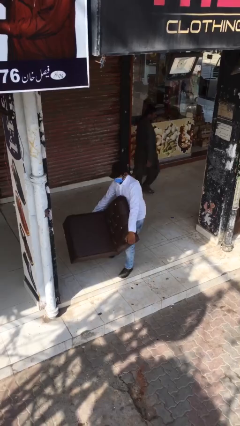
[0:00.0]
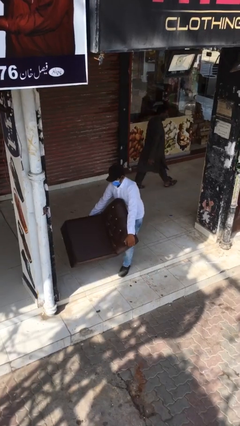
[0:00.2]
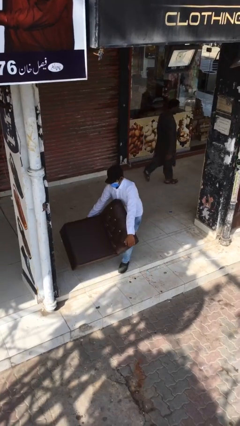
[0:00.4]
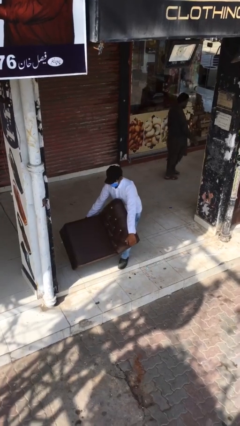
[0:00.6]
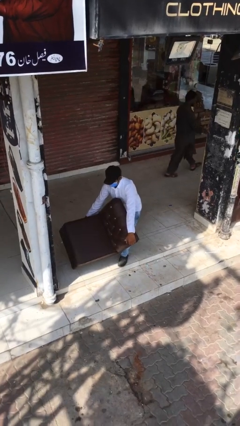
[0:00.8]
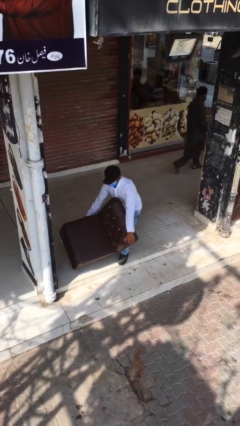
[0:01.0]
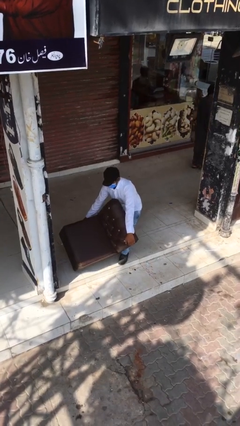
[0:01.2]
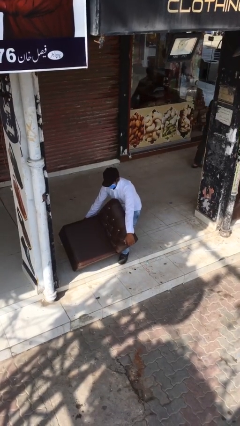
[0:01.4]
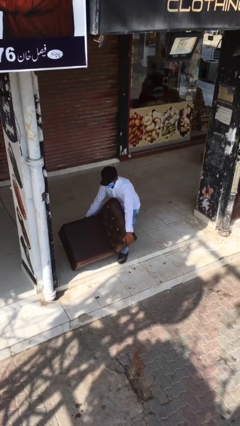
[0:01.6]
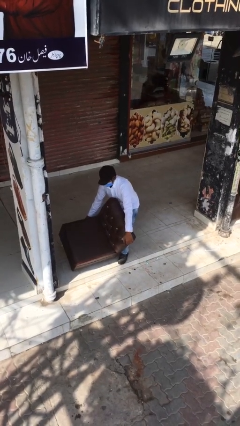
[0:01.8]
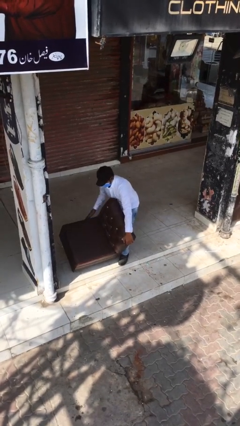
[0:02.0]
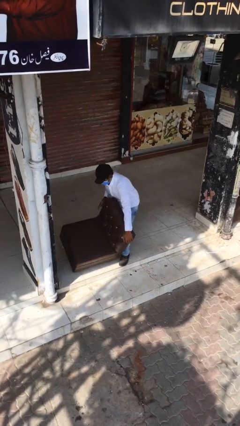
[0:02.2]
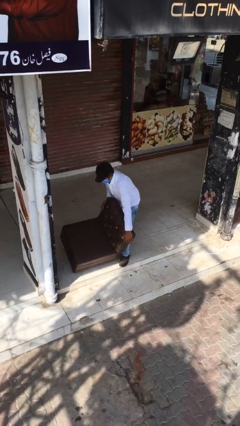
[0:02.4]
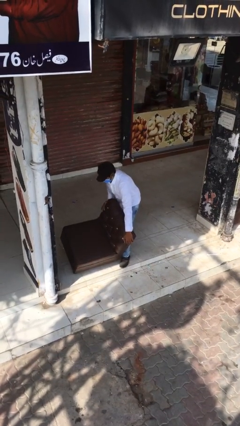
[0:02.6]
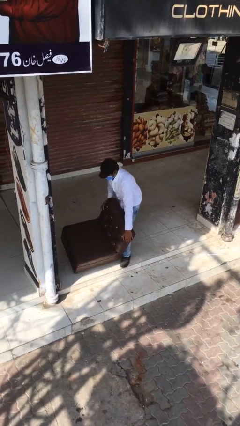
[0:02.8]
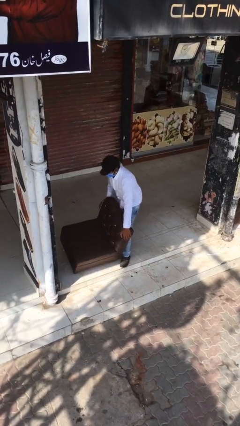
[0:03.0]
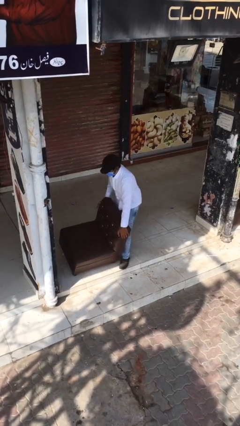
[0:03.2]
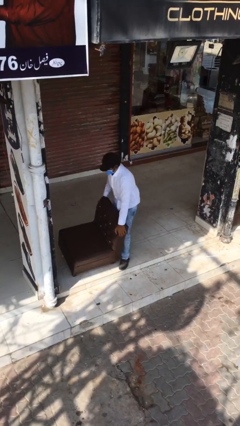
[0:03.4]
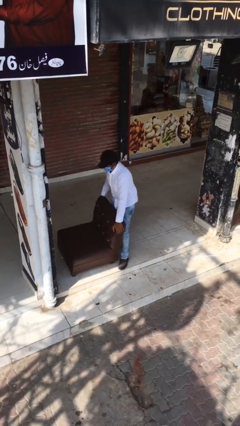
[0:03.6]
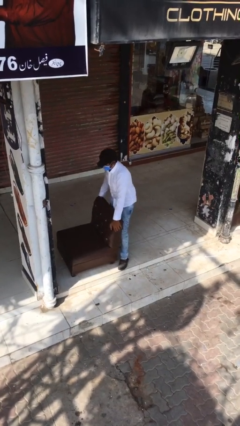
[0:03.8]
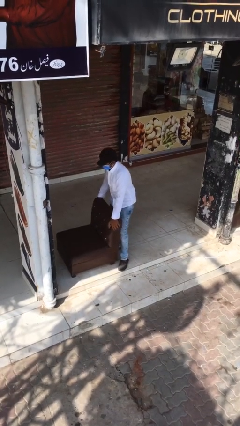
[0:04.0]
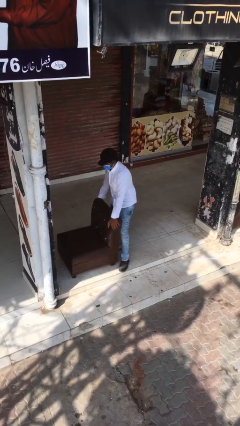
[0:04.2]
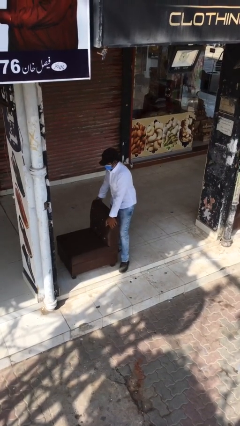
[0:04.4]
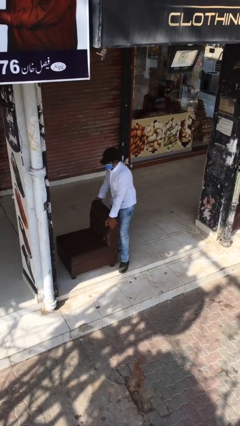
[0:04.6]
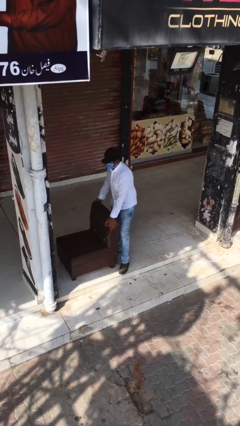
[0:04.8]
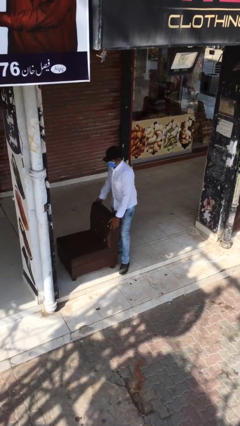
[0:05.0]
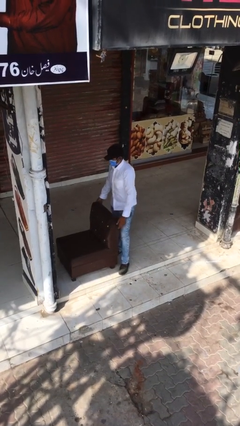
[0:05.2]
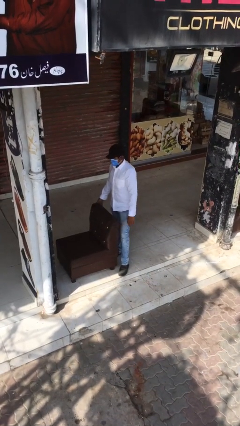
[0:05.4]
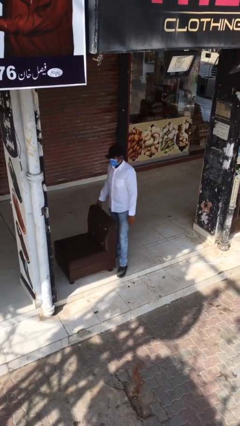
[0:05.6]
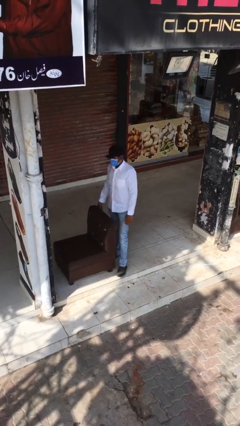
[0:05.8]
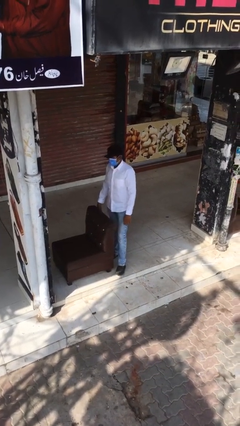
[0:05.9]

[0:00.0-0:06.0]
person puts down object on floor

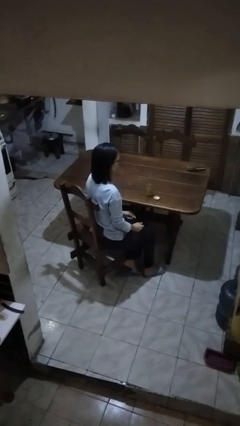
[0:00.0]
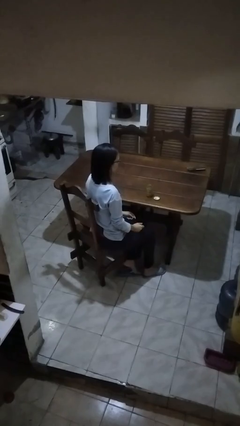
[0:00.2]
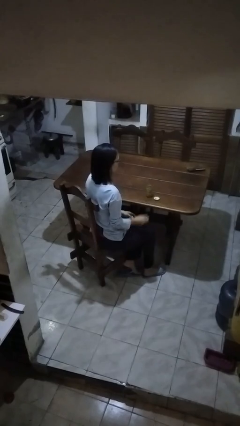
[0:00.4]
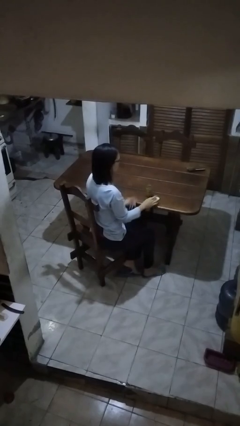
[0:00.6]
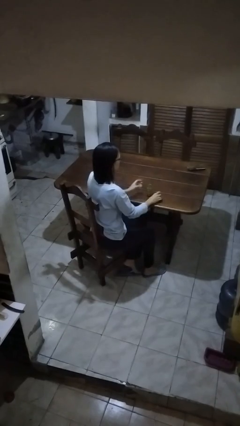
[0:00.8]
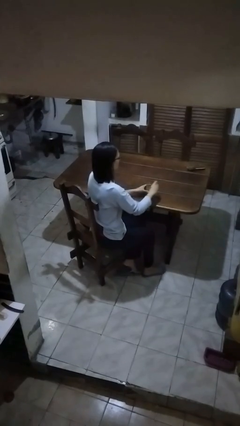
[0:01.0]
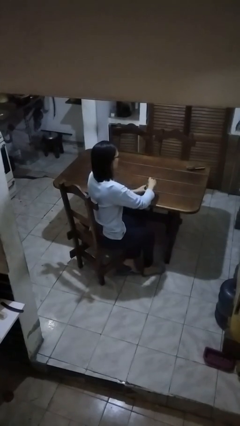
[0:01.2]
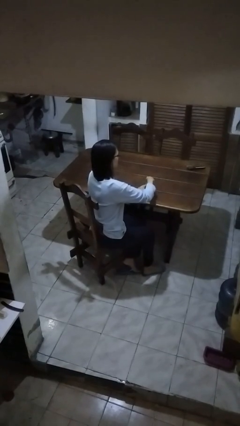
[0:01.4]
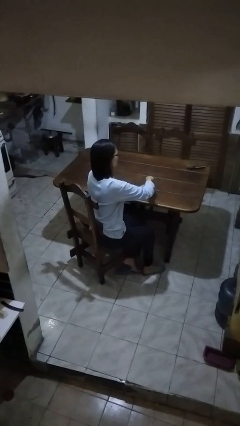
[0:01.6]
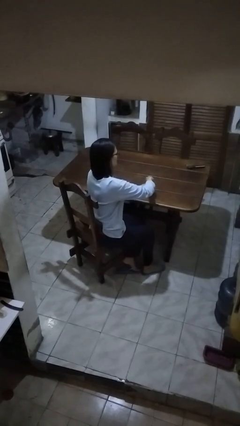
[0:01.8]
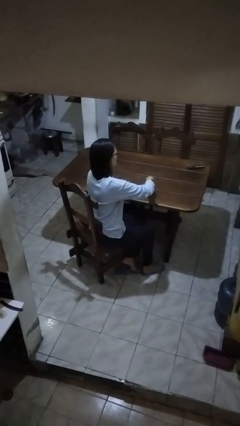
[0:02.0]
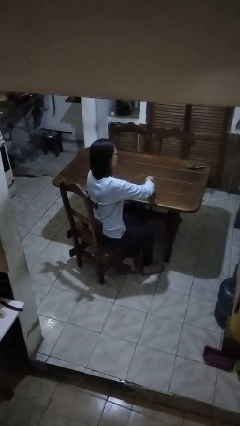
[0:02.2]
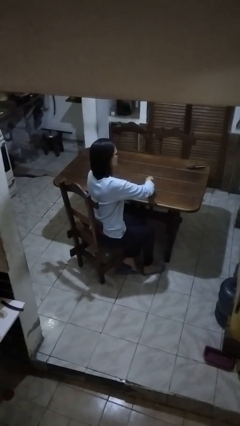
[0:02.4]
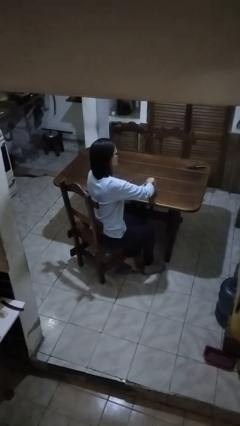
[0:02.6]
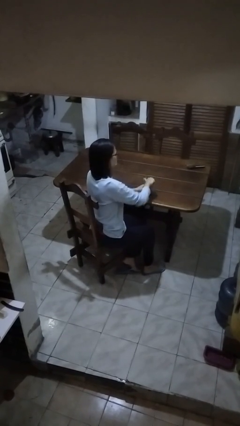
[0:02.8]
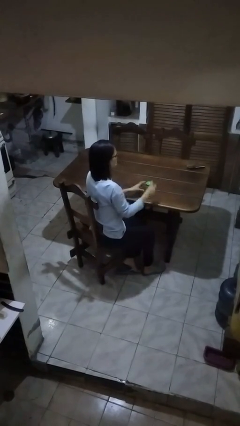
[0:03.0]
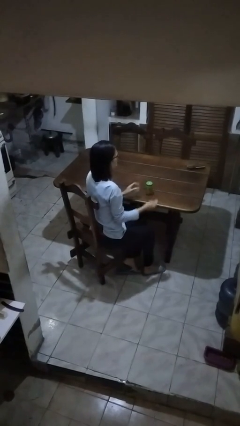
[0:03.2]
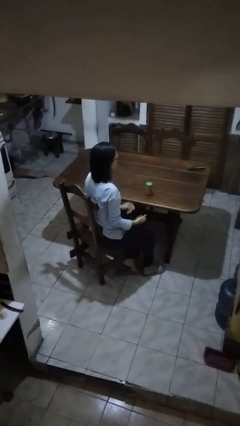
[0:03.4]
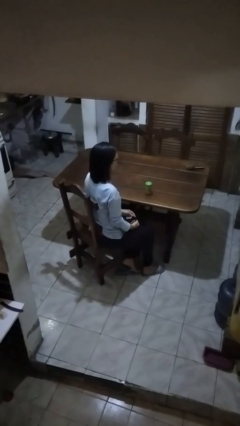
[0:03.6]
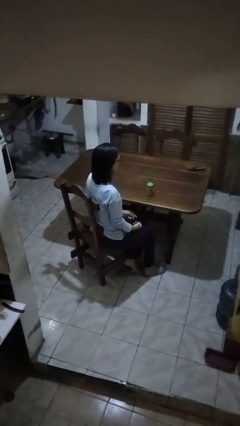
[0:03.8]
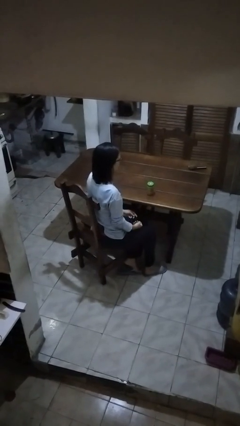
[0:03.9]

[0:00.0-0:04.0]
person closes jar

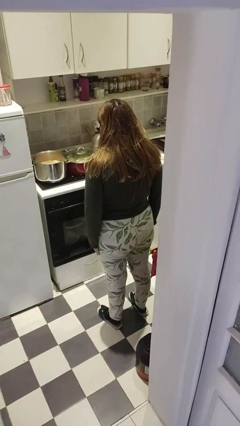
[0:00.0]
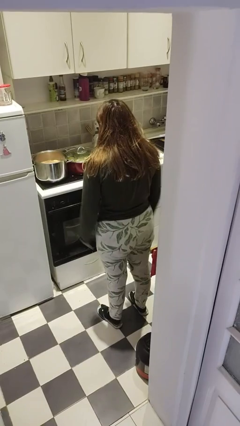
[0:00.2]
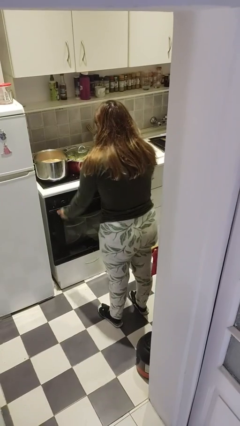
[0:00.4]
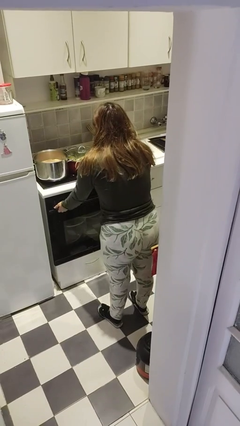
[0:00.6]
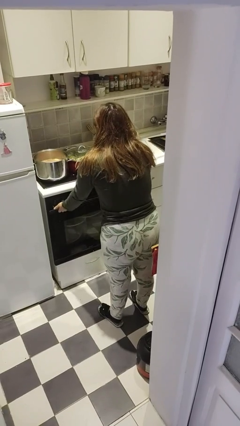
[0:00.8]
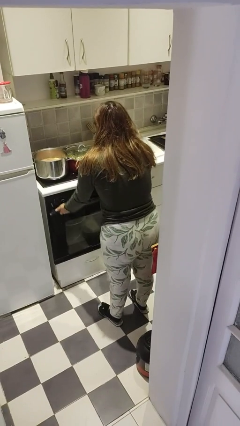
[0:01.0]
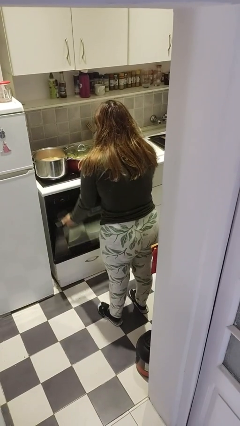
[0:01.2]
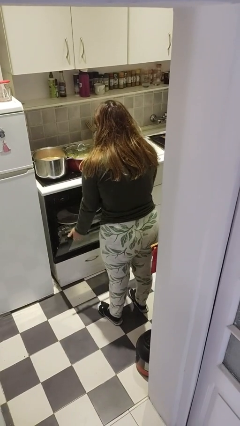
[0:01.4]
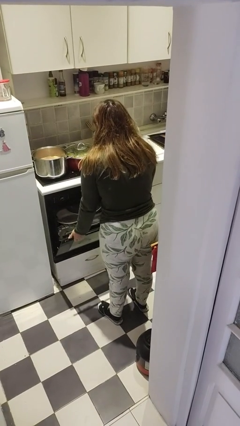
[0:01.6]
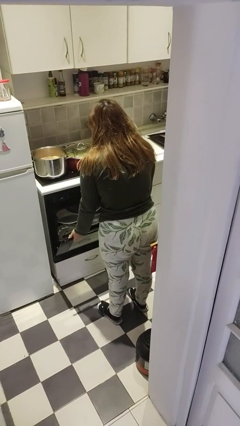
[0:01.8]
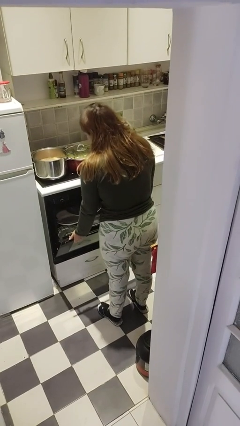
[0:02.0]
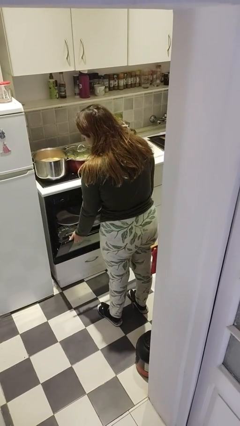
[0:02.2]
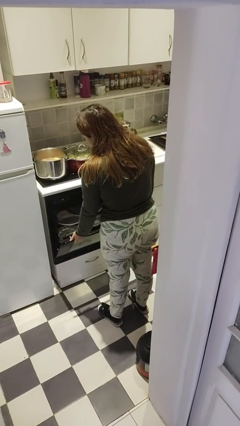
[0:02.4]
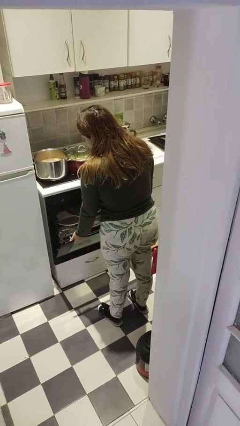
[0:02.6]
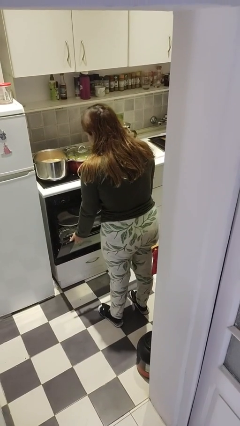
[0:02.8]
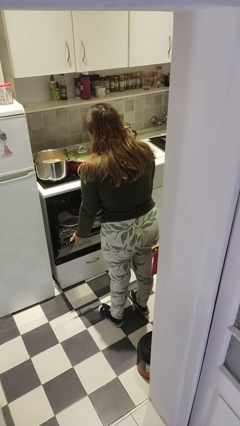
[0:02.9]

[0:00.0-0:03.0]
person opens dishwasher

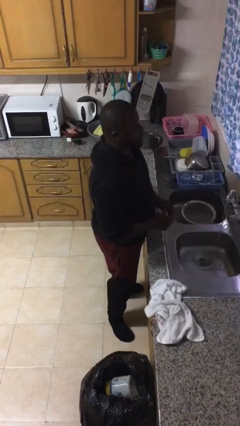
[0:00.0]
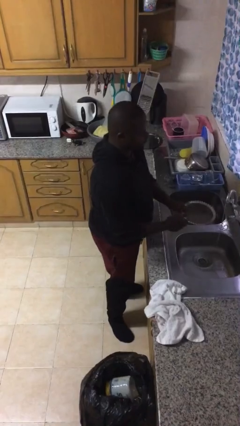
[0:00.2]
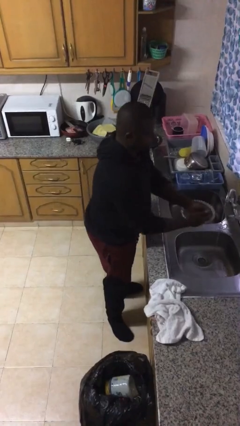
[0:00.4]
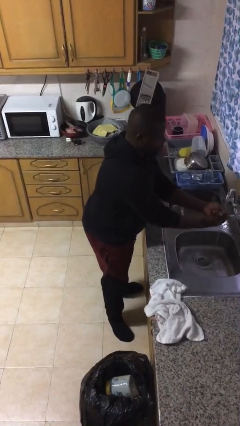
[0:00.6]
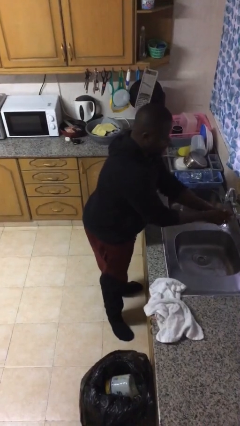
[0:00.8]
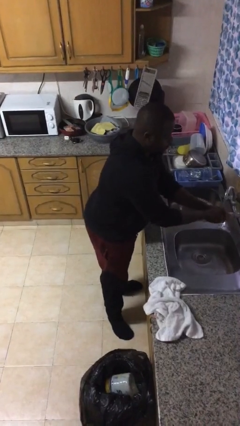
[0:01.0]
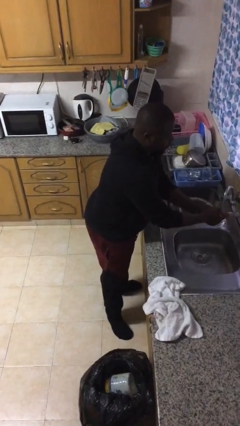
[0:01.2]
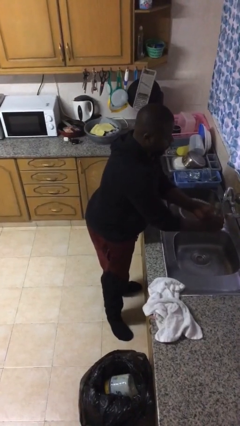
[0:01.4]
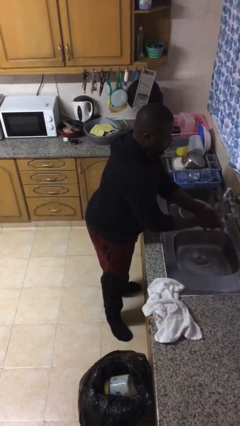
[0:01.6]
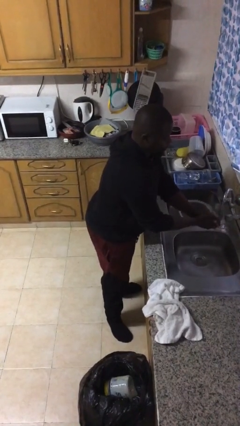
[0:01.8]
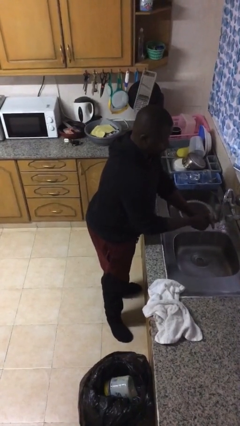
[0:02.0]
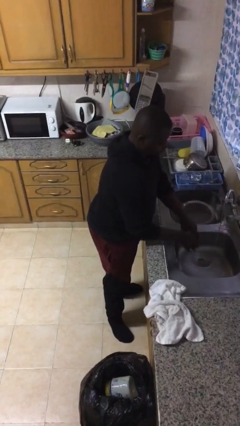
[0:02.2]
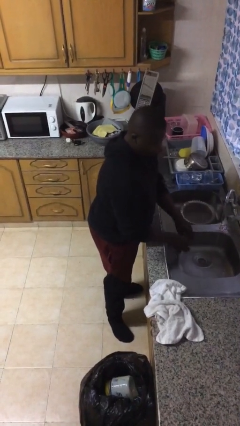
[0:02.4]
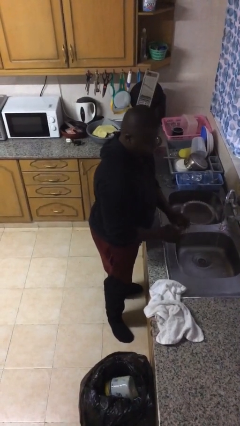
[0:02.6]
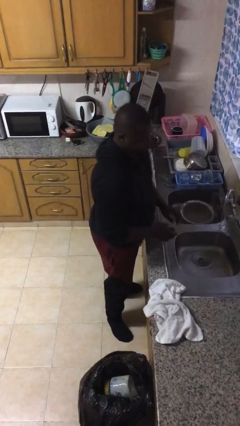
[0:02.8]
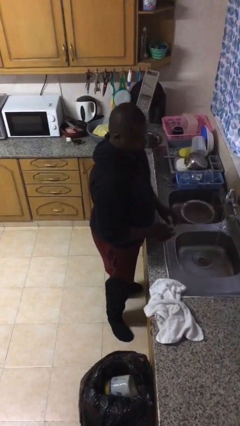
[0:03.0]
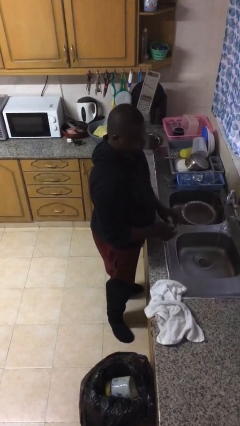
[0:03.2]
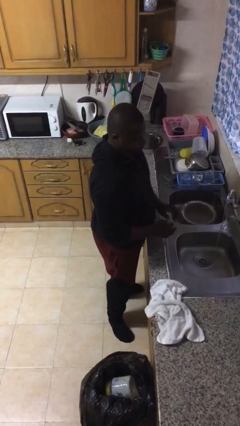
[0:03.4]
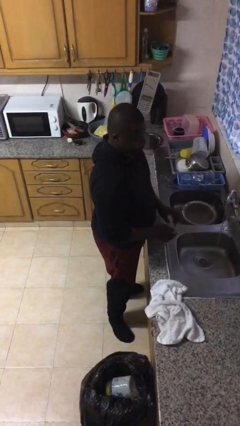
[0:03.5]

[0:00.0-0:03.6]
person washes hands

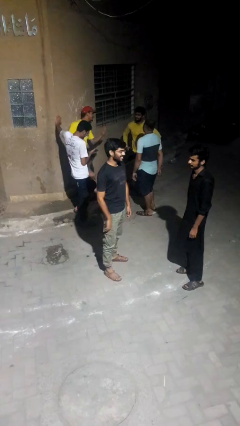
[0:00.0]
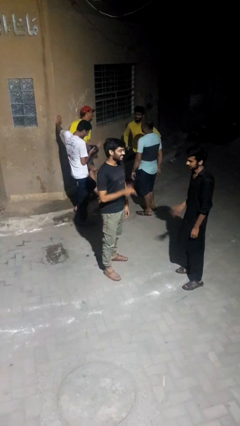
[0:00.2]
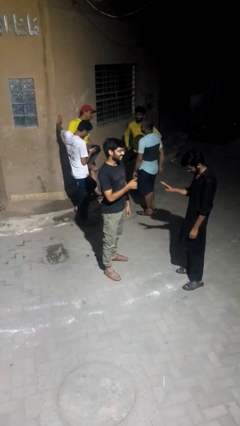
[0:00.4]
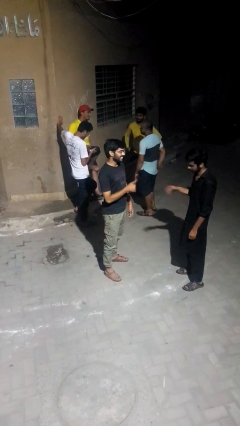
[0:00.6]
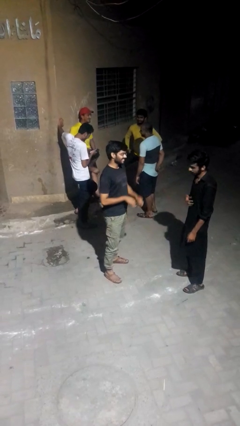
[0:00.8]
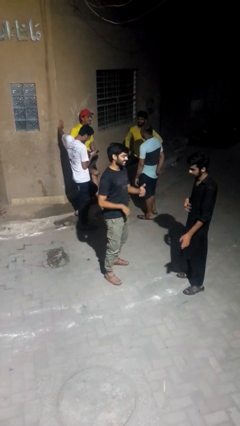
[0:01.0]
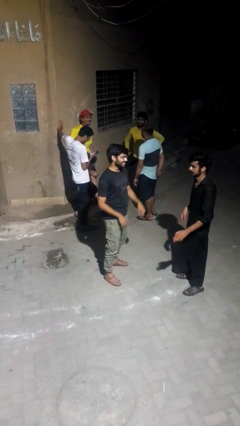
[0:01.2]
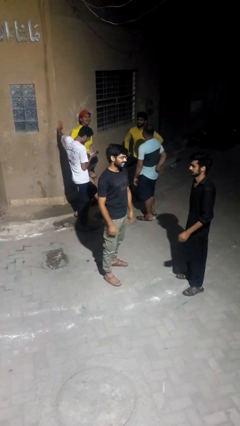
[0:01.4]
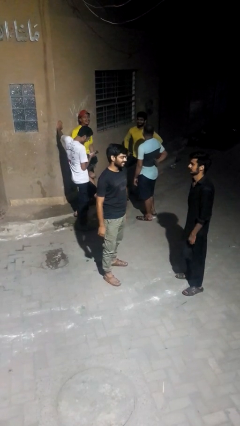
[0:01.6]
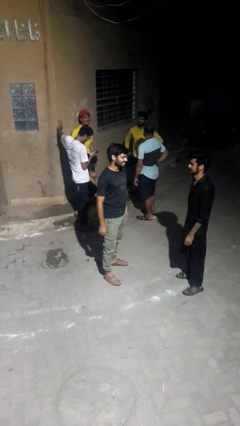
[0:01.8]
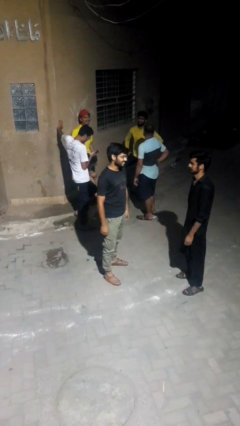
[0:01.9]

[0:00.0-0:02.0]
person talks to person
